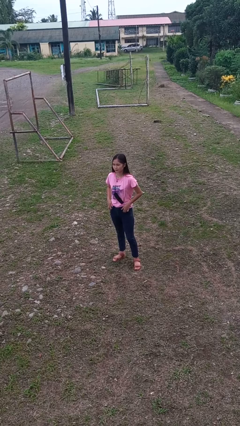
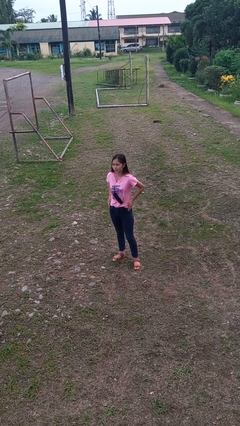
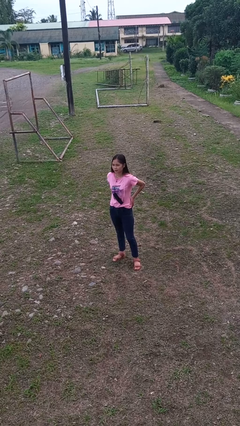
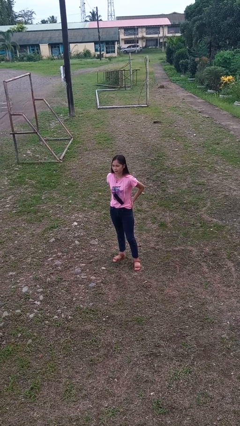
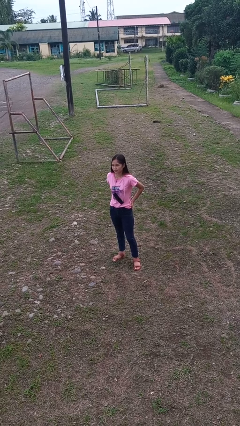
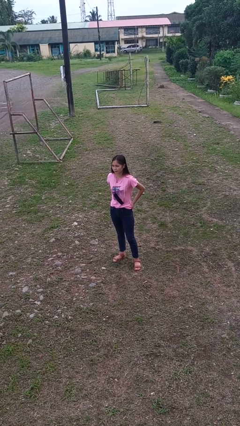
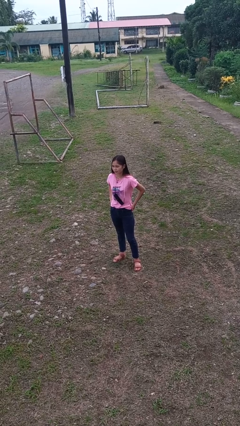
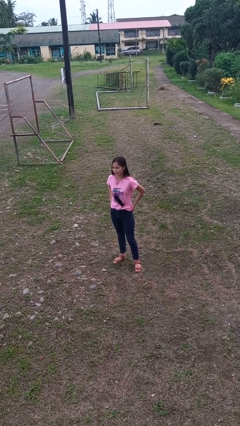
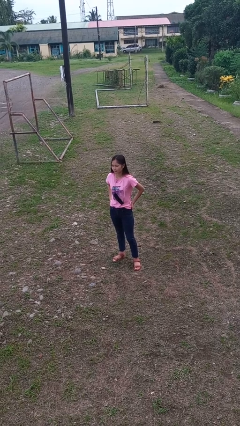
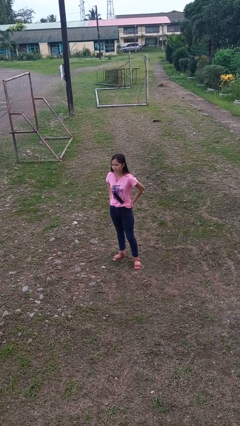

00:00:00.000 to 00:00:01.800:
person puts hands in back pockets

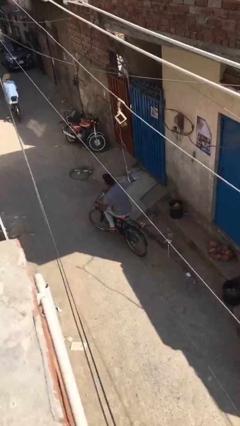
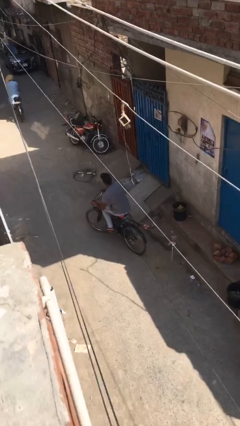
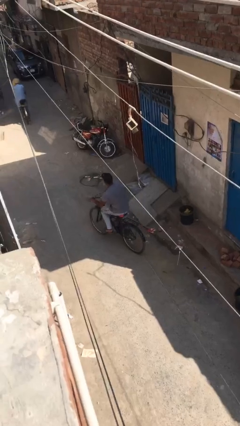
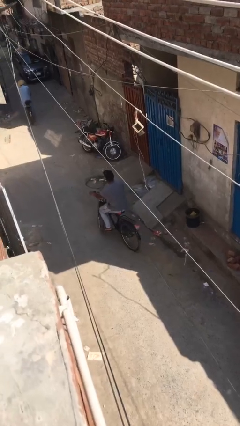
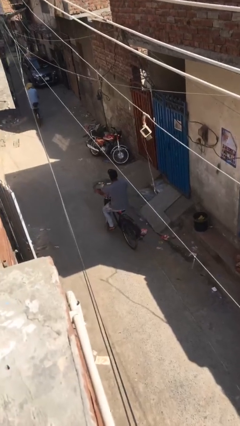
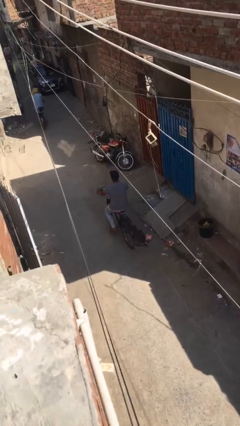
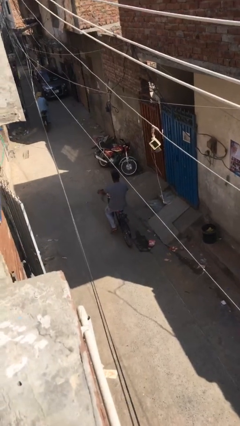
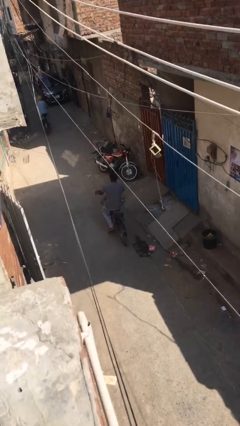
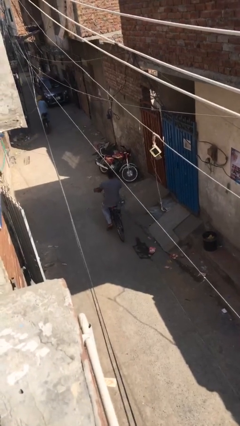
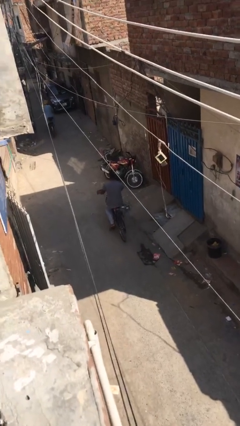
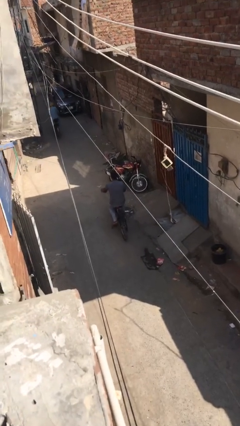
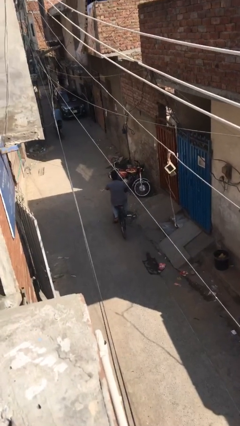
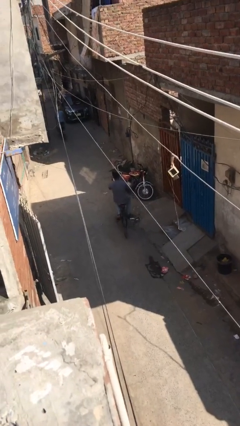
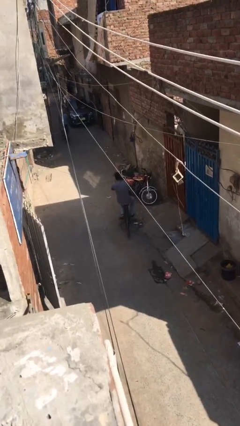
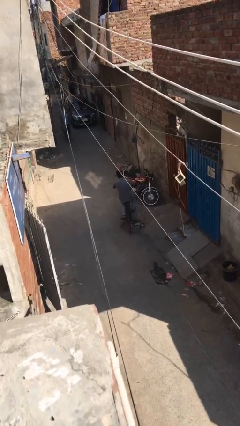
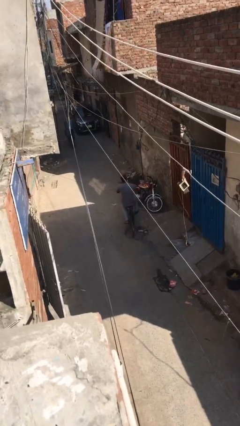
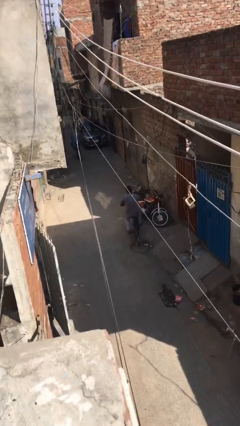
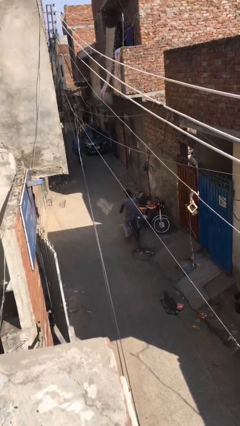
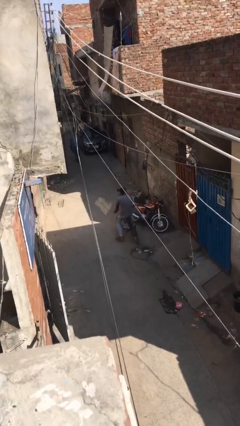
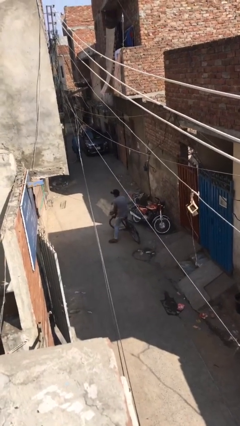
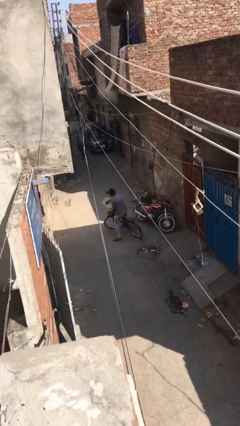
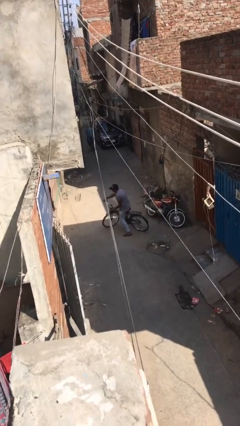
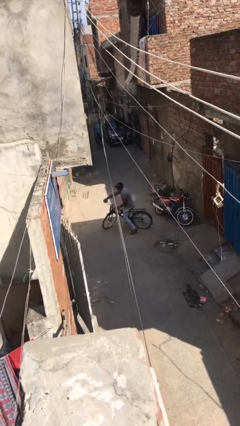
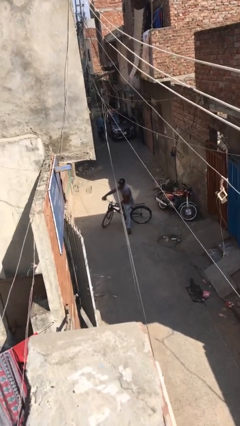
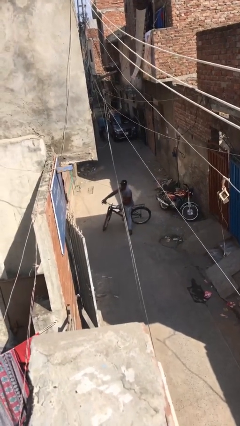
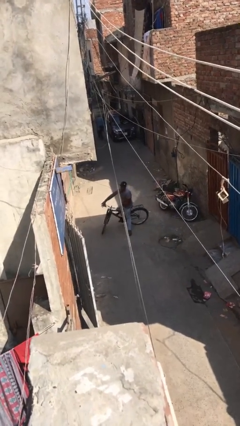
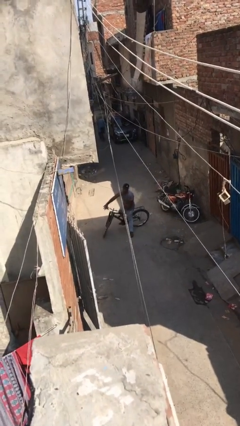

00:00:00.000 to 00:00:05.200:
person rides bicycle

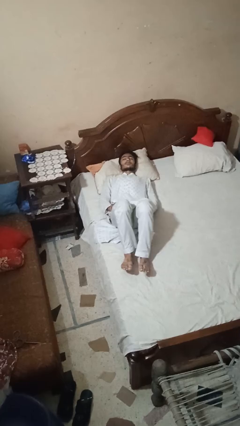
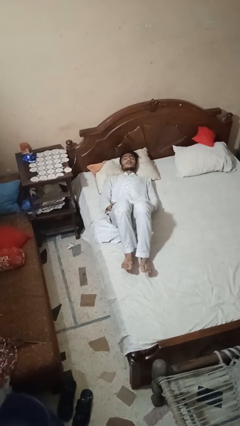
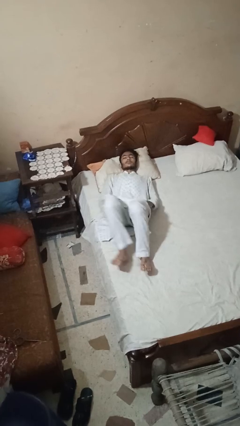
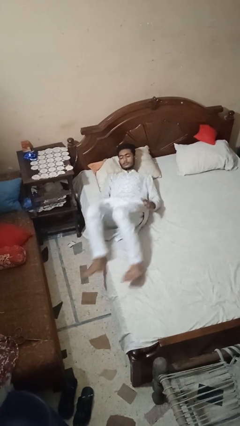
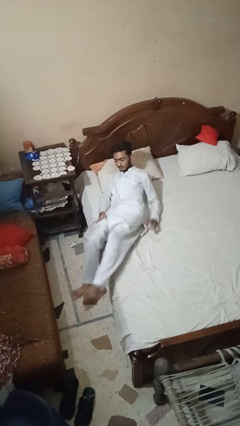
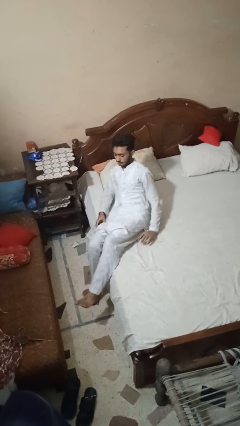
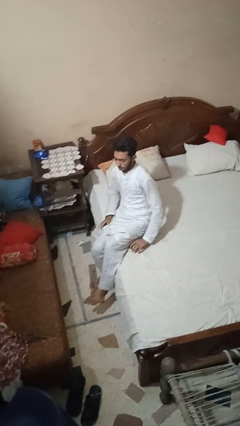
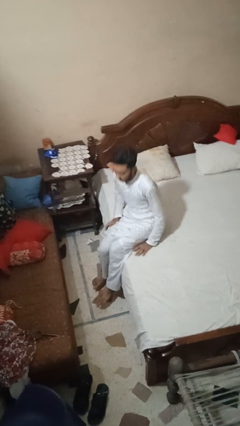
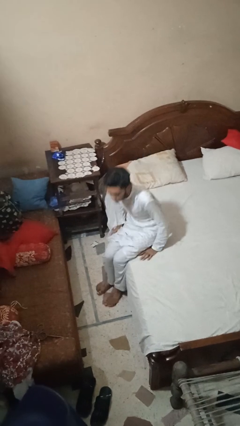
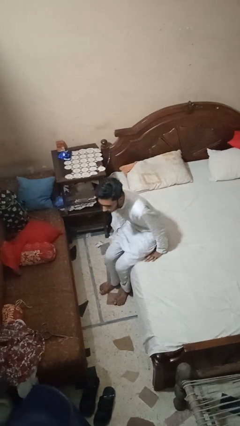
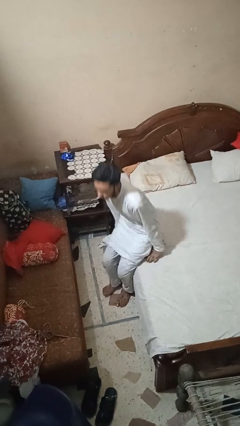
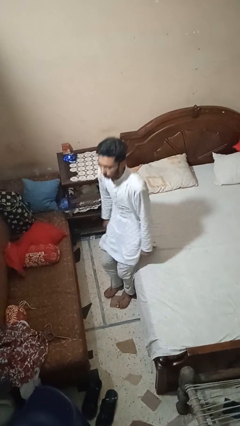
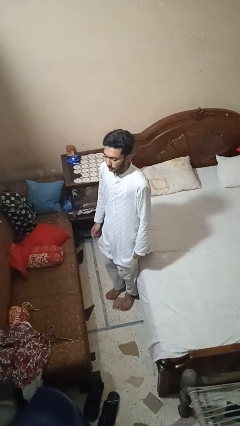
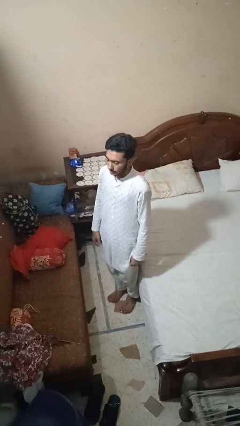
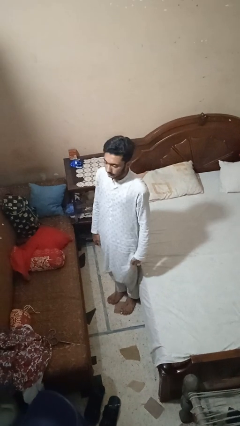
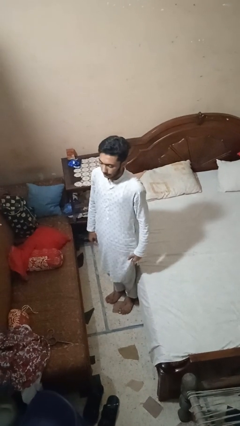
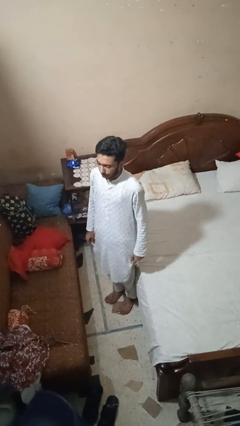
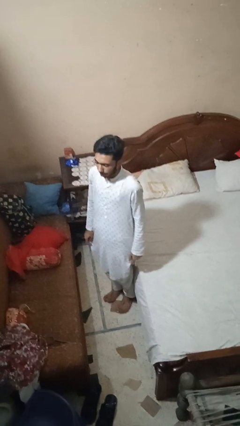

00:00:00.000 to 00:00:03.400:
person stands up

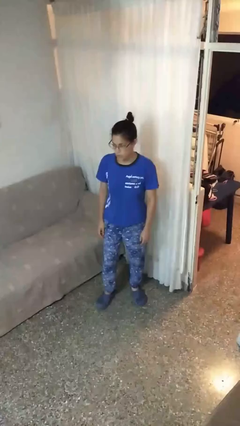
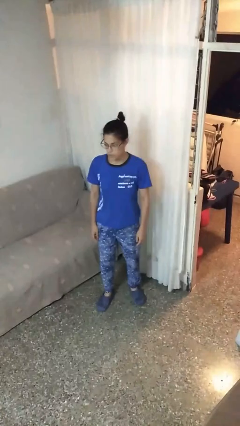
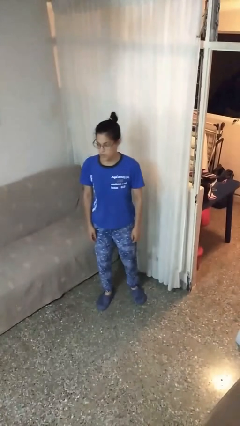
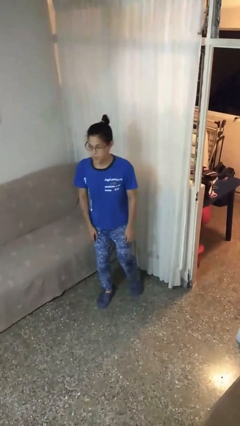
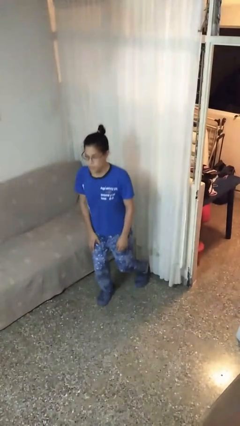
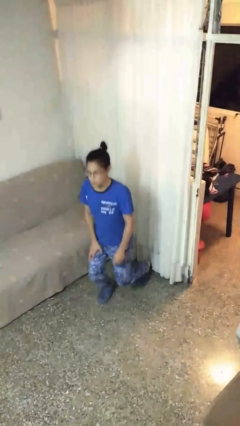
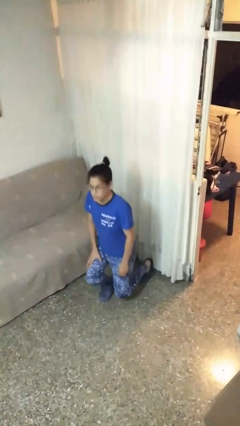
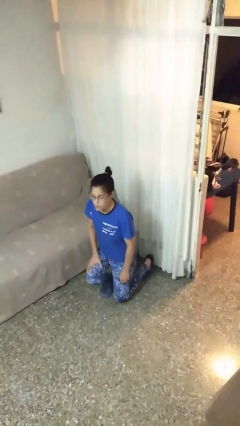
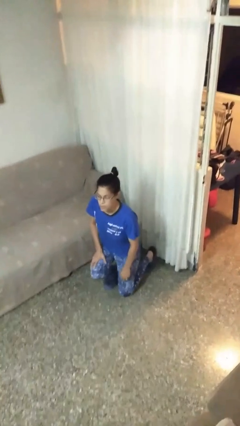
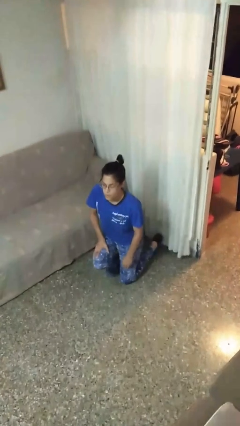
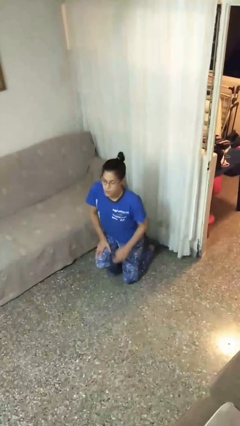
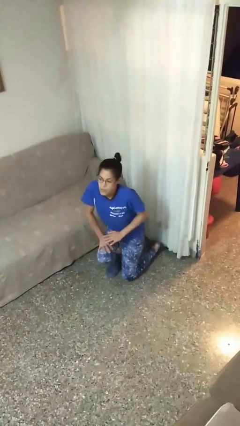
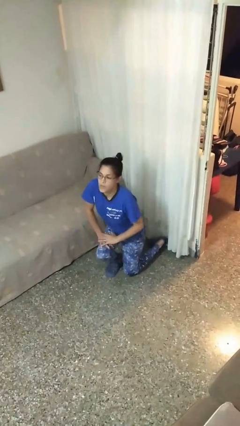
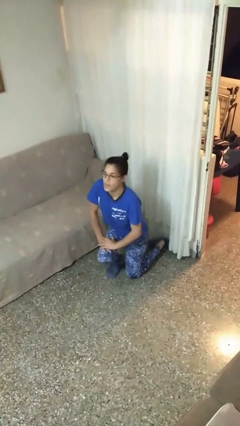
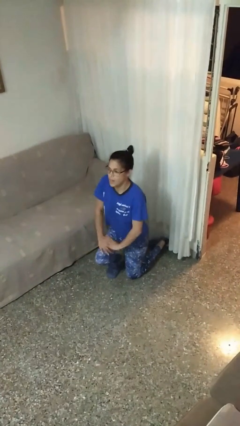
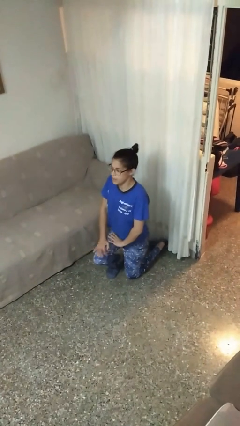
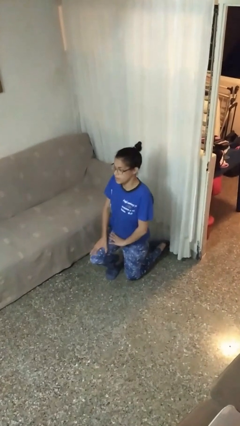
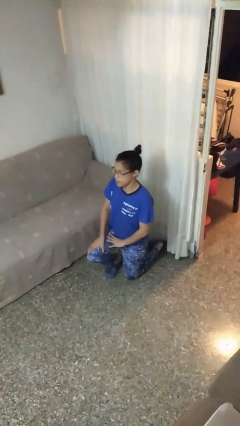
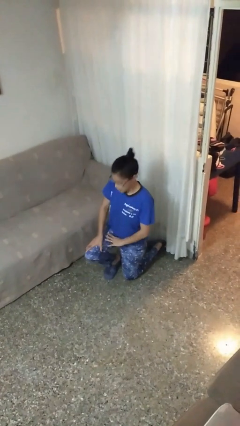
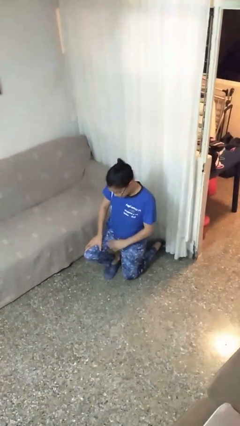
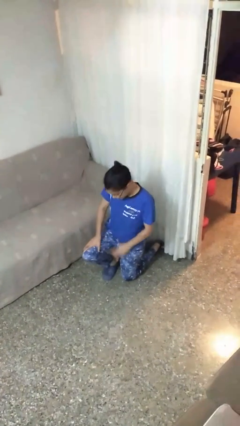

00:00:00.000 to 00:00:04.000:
person kneels

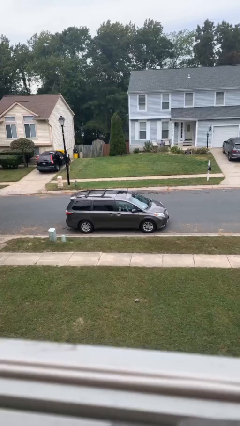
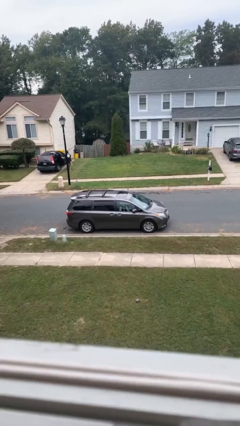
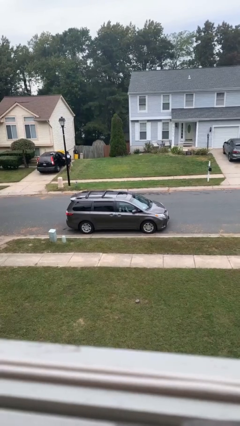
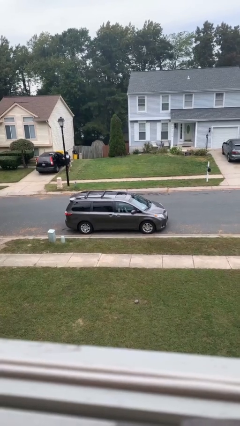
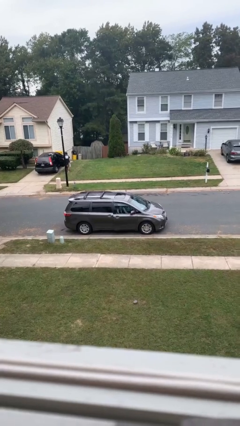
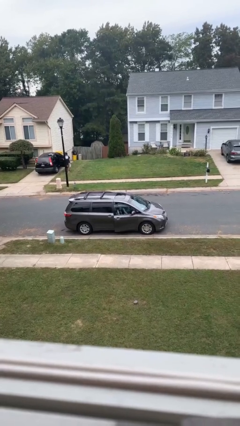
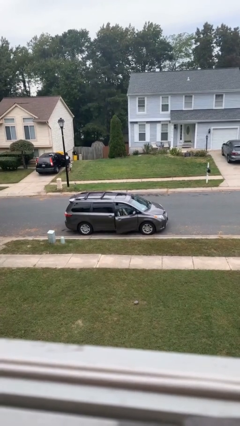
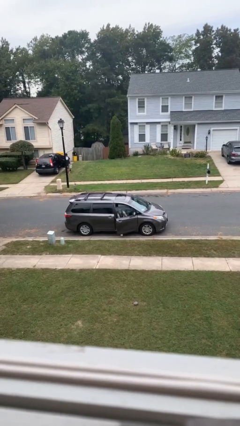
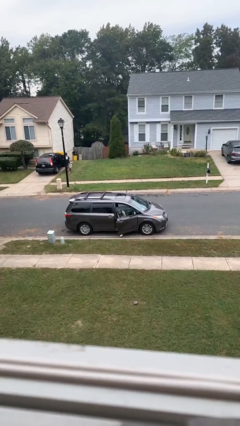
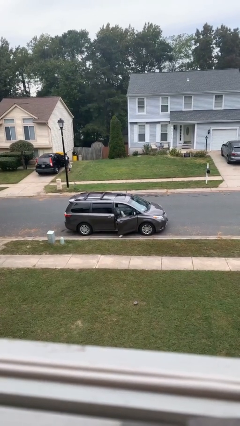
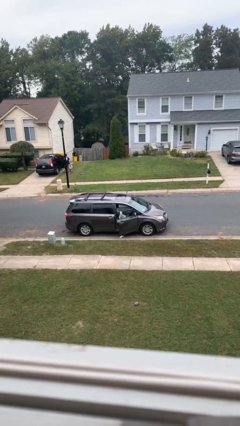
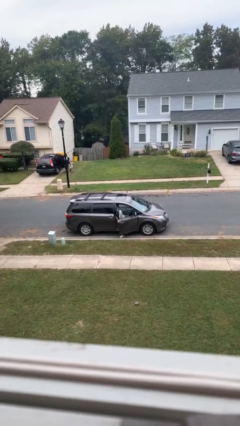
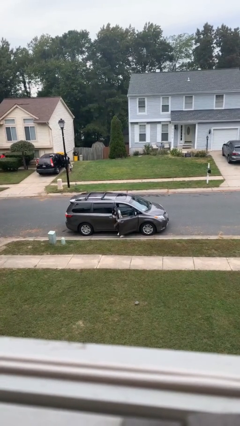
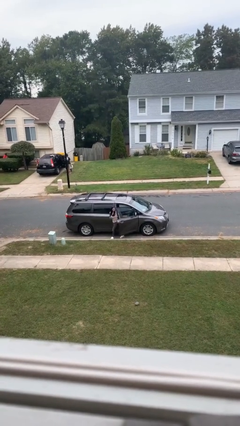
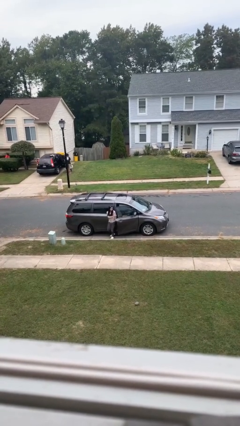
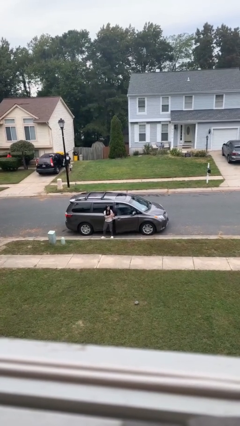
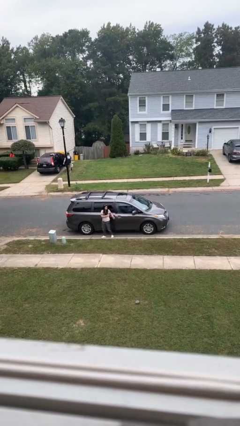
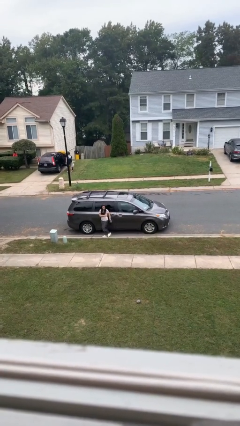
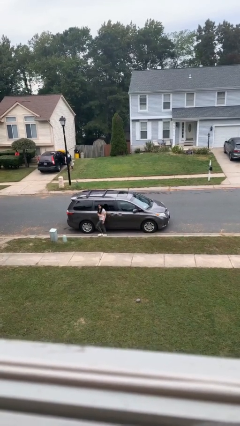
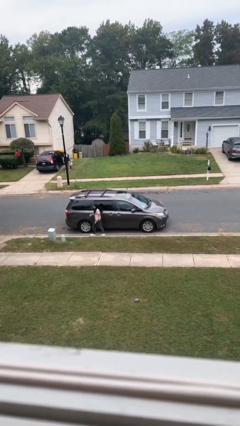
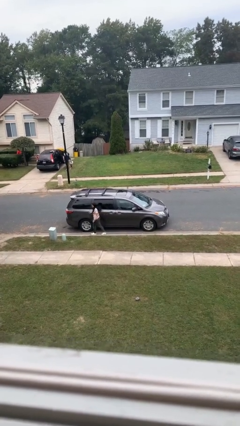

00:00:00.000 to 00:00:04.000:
car drops off person
